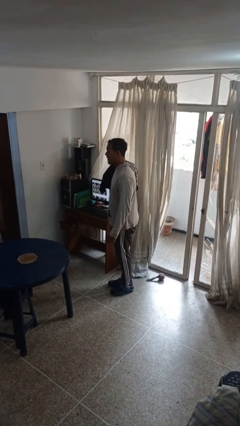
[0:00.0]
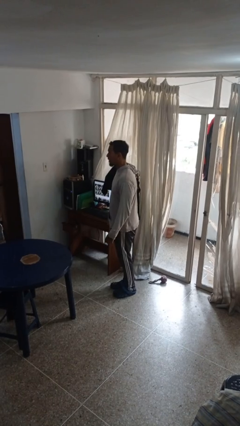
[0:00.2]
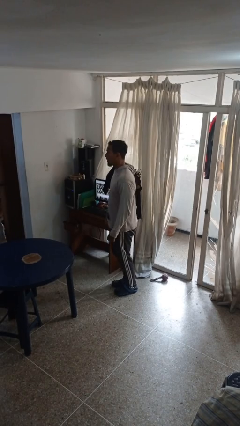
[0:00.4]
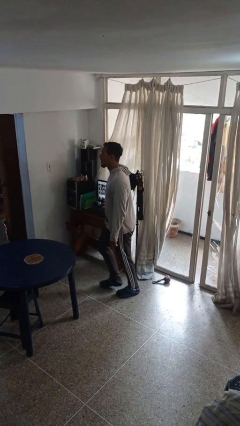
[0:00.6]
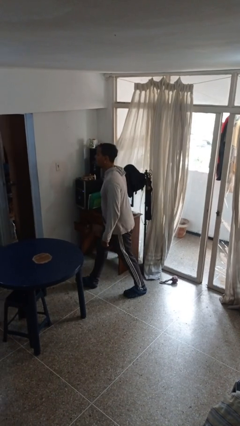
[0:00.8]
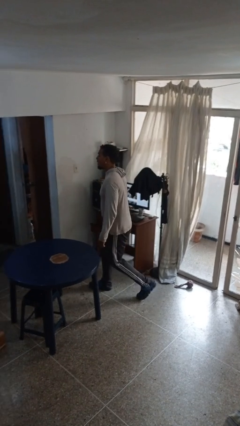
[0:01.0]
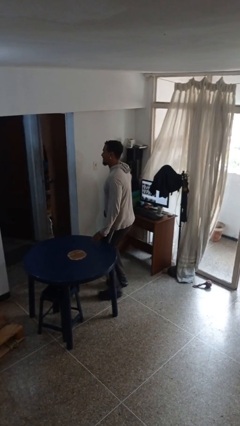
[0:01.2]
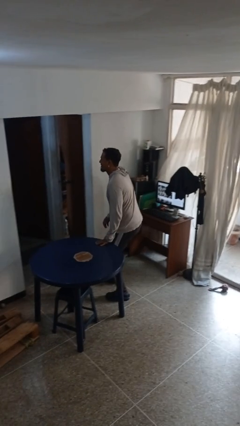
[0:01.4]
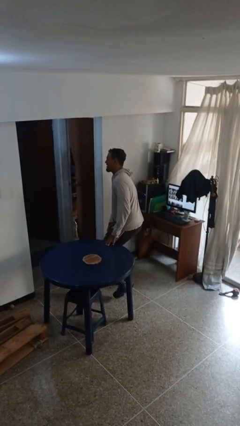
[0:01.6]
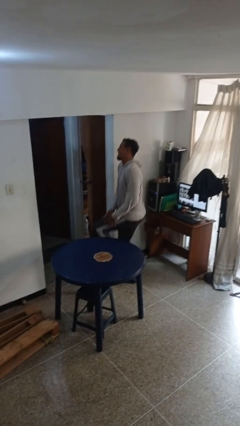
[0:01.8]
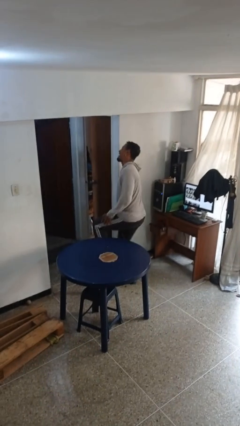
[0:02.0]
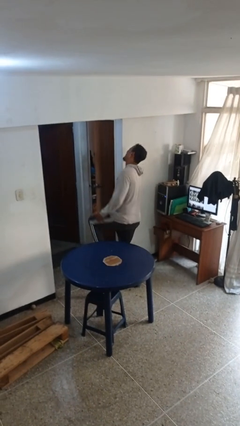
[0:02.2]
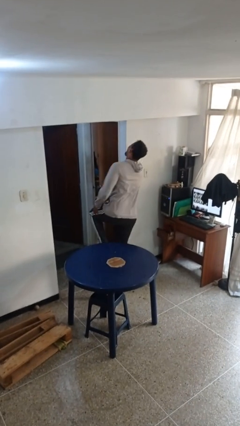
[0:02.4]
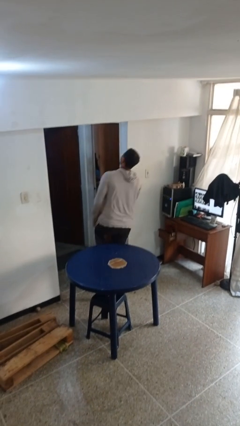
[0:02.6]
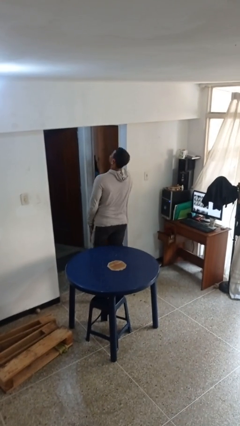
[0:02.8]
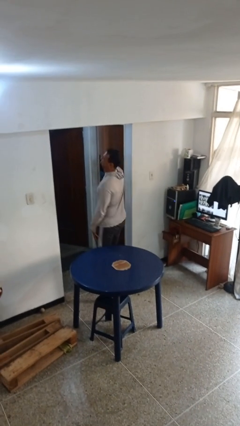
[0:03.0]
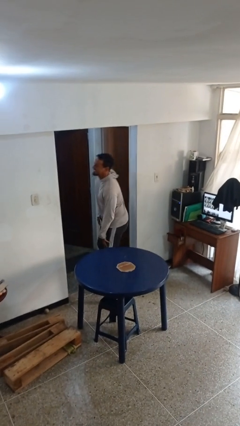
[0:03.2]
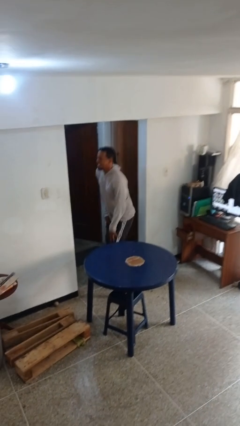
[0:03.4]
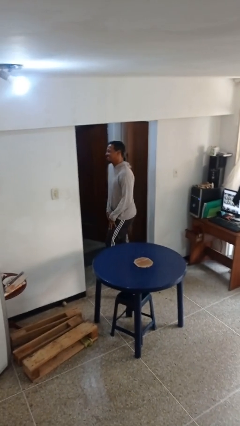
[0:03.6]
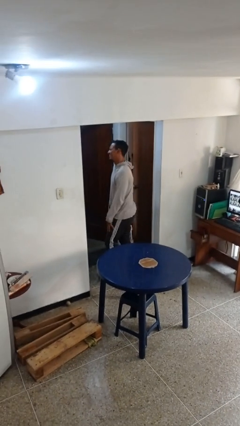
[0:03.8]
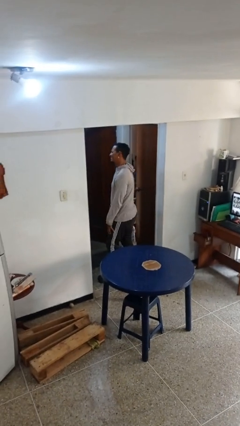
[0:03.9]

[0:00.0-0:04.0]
person bumps into table

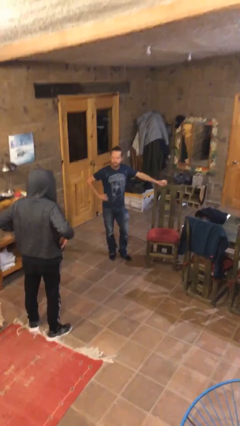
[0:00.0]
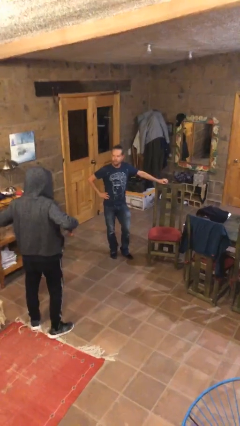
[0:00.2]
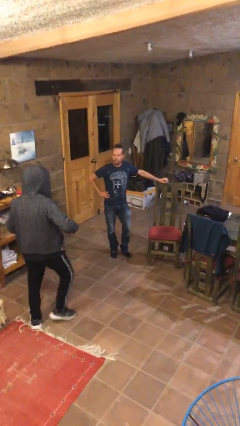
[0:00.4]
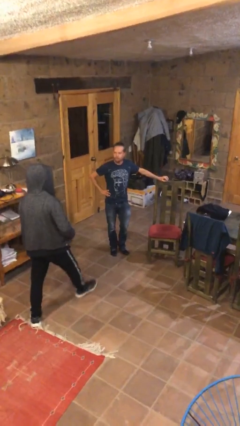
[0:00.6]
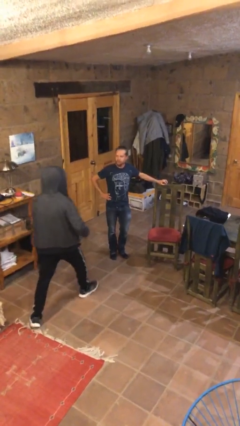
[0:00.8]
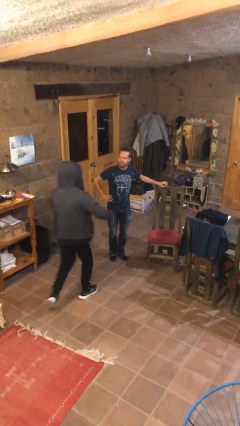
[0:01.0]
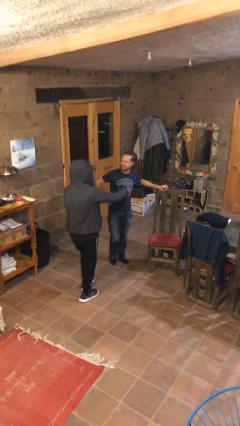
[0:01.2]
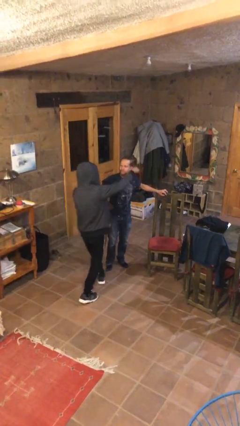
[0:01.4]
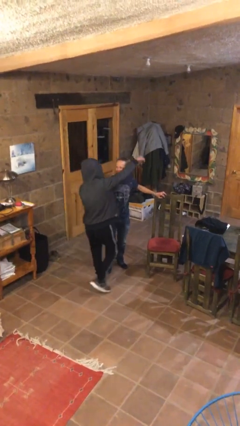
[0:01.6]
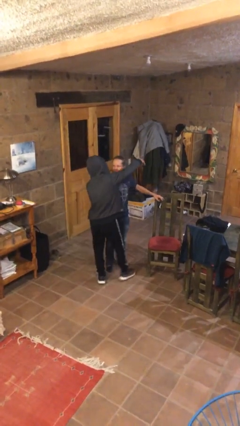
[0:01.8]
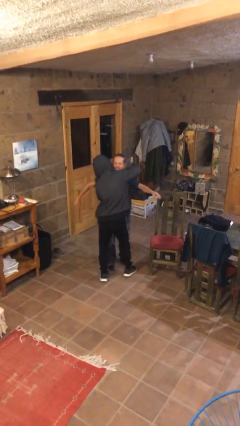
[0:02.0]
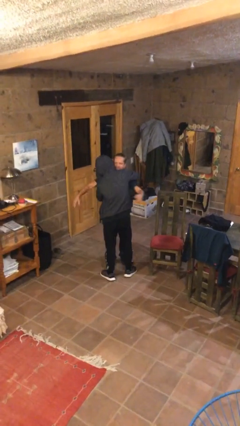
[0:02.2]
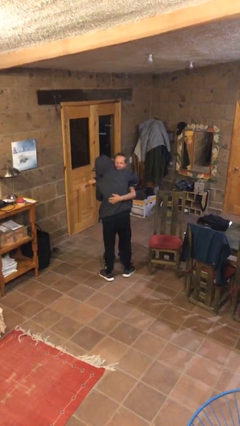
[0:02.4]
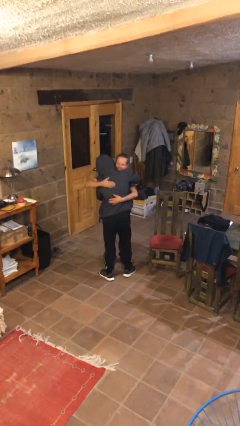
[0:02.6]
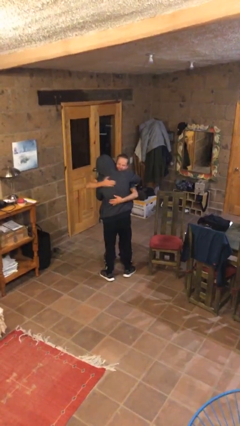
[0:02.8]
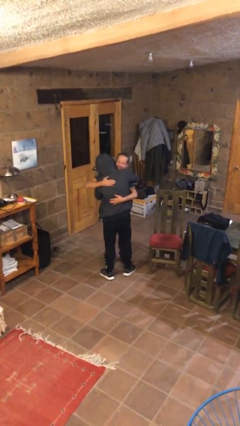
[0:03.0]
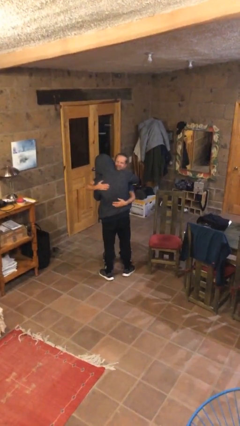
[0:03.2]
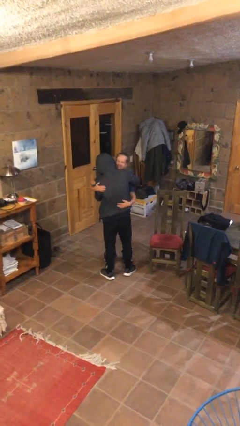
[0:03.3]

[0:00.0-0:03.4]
person embraces person

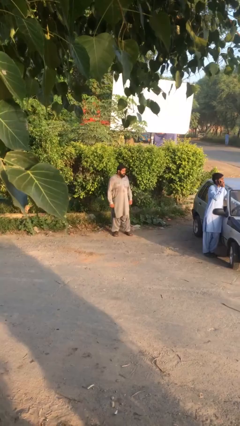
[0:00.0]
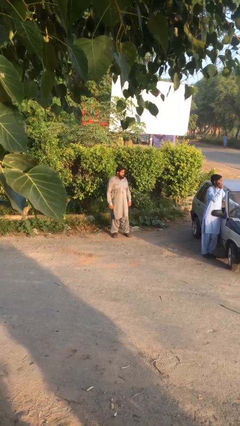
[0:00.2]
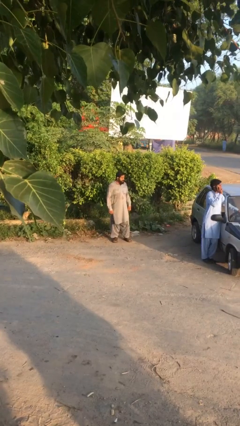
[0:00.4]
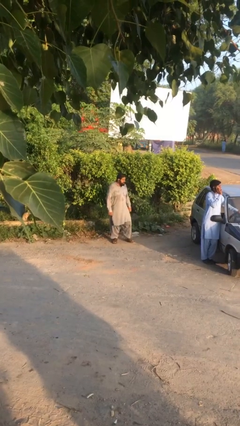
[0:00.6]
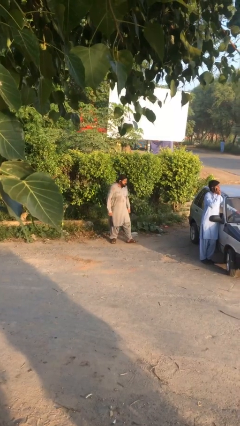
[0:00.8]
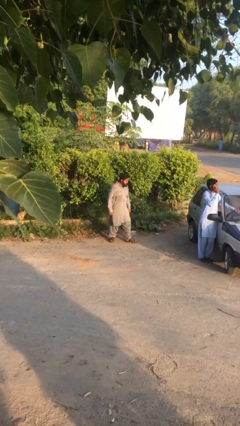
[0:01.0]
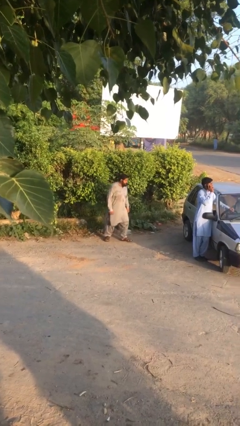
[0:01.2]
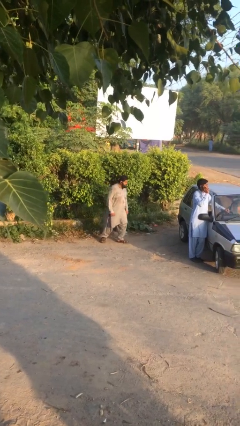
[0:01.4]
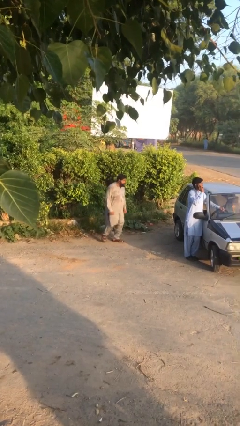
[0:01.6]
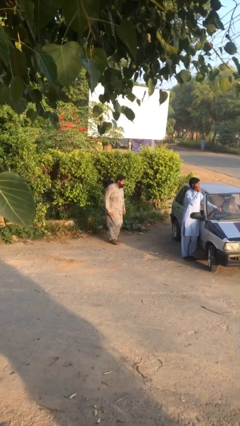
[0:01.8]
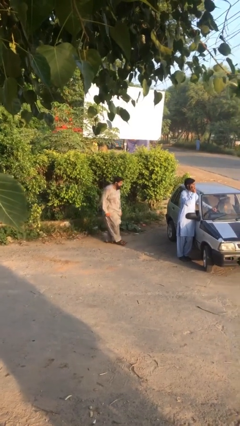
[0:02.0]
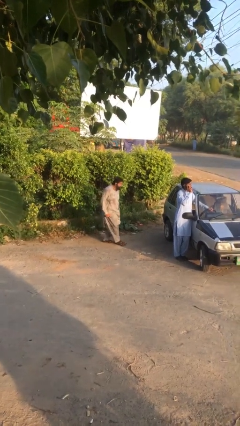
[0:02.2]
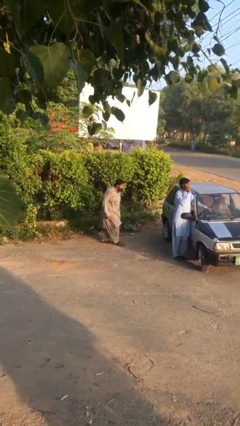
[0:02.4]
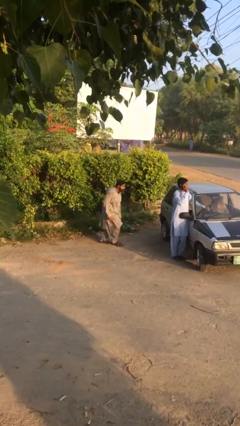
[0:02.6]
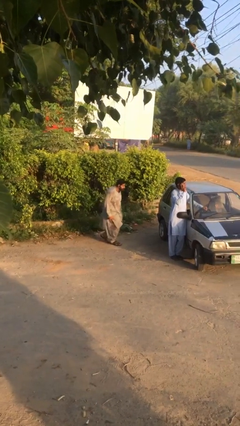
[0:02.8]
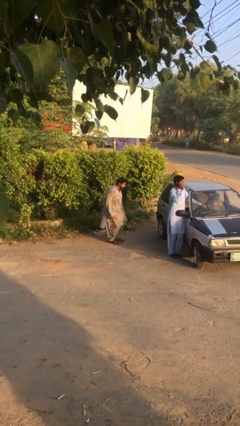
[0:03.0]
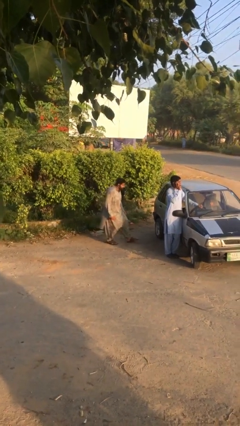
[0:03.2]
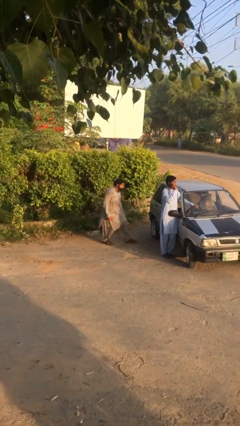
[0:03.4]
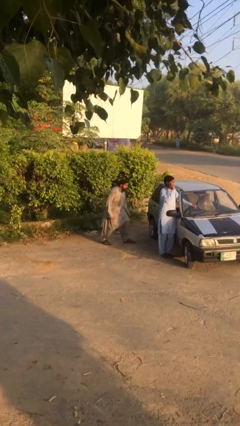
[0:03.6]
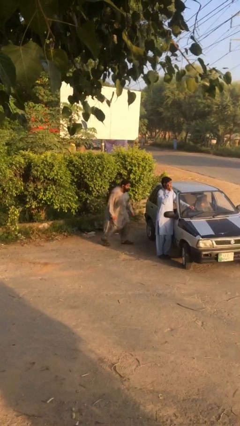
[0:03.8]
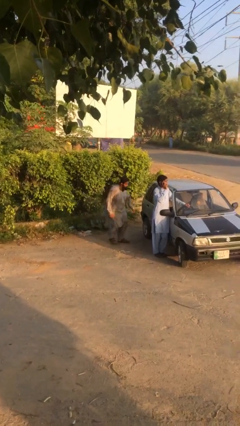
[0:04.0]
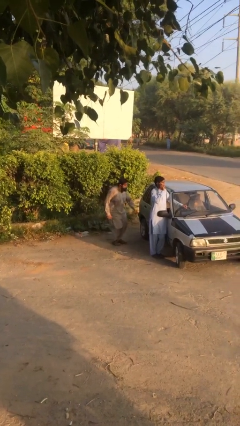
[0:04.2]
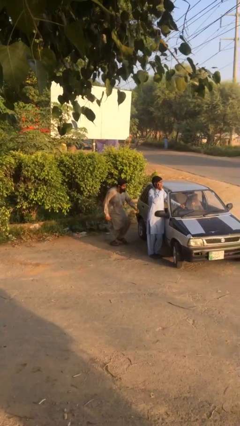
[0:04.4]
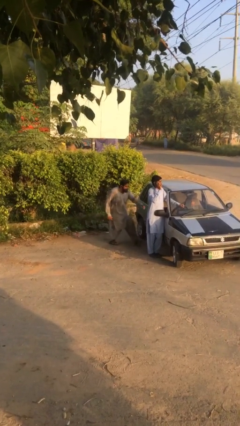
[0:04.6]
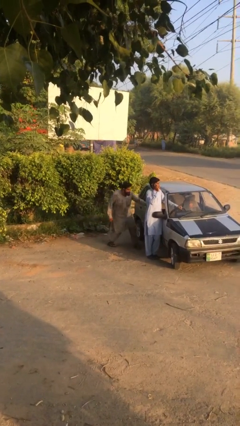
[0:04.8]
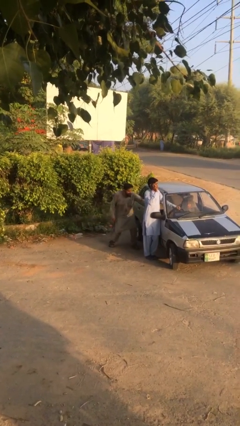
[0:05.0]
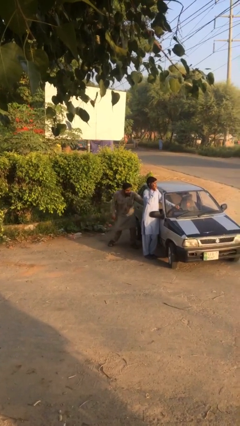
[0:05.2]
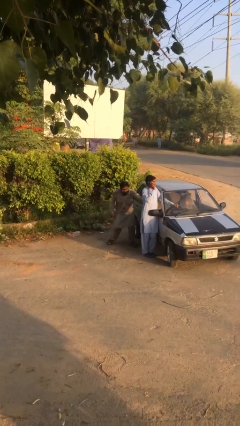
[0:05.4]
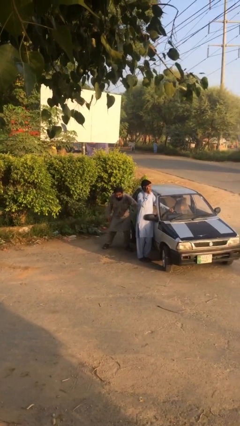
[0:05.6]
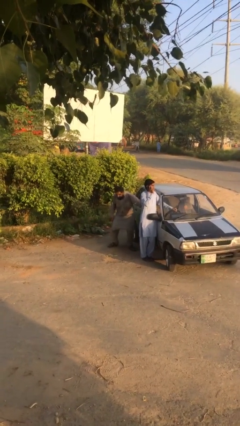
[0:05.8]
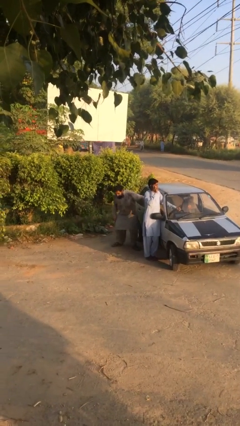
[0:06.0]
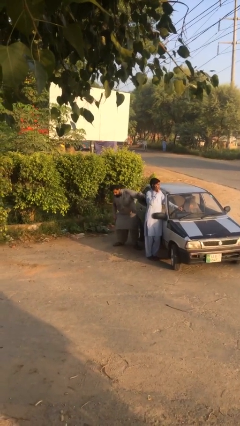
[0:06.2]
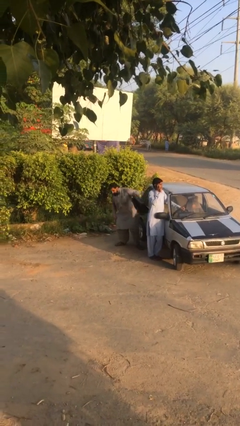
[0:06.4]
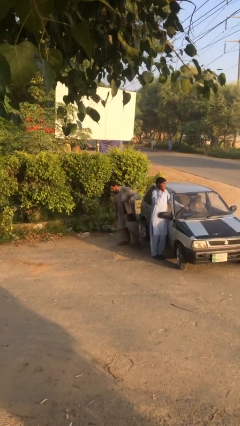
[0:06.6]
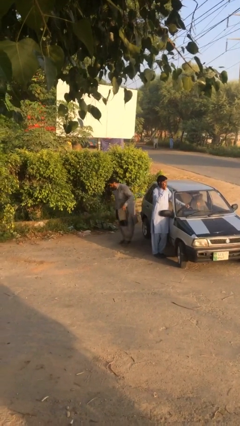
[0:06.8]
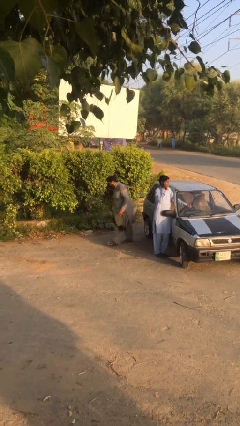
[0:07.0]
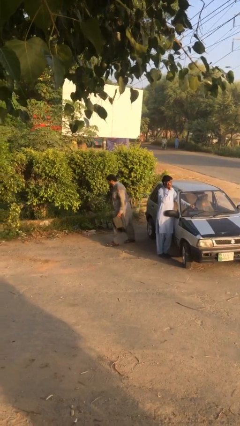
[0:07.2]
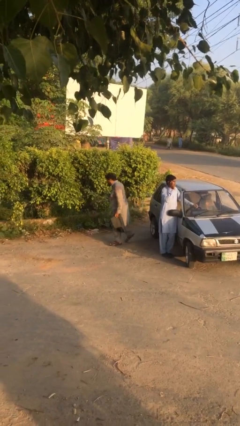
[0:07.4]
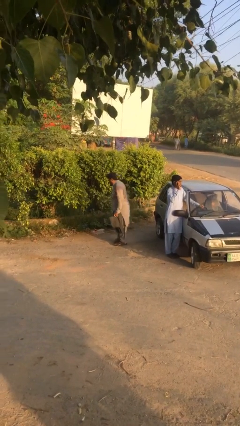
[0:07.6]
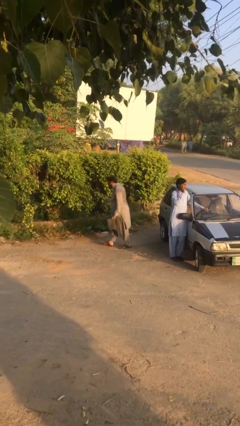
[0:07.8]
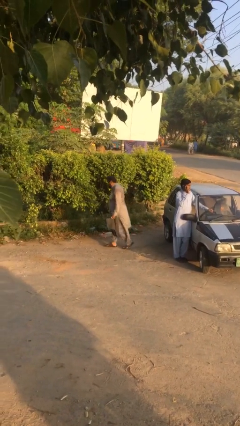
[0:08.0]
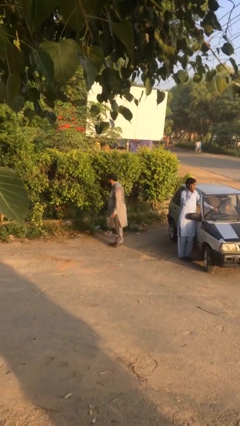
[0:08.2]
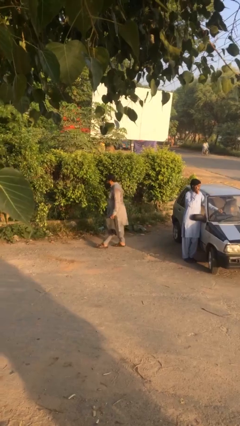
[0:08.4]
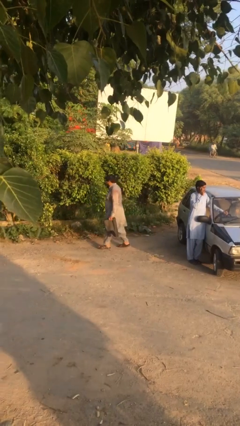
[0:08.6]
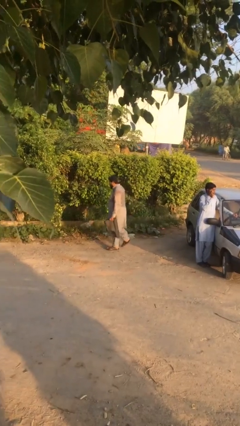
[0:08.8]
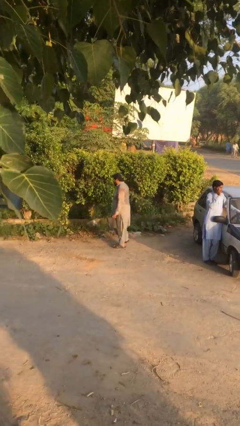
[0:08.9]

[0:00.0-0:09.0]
person steals object from person

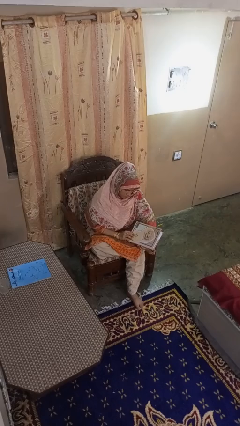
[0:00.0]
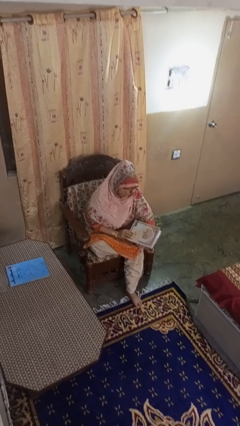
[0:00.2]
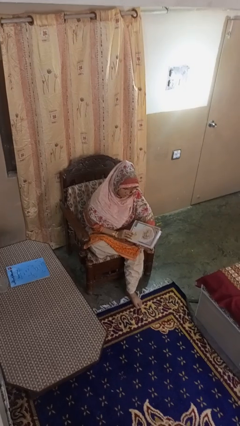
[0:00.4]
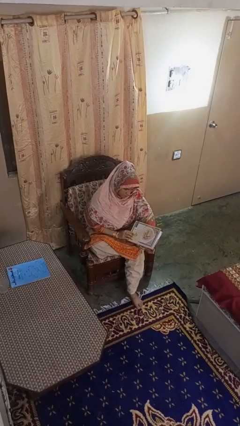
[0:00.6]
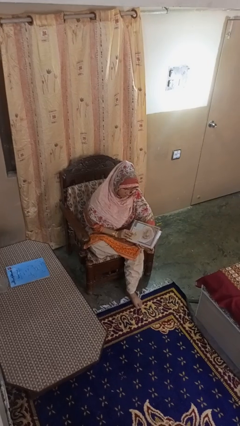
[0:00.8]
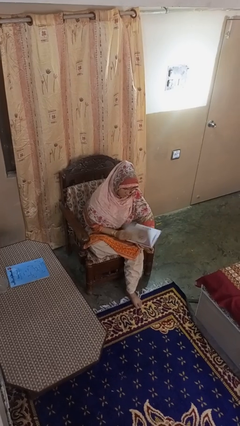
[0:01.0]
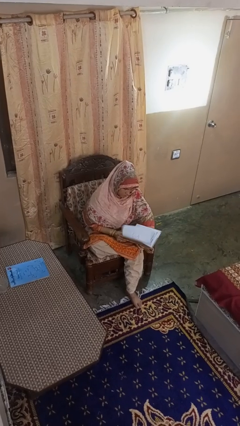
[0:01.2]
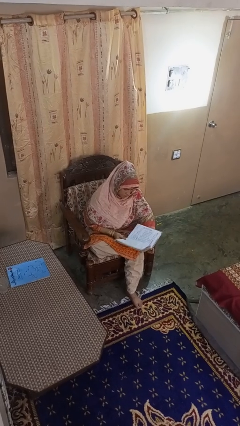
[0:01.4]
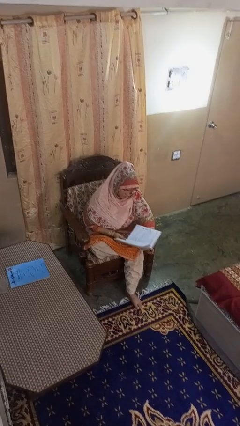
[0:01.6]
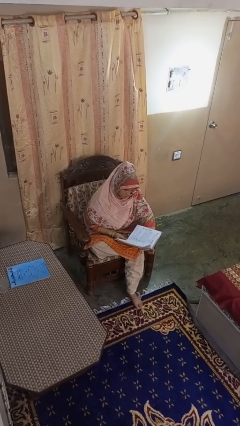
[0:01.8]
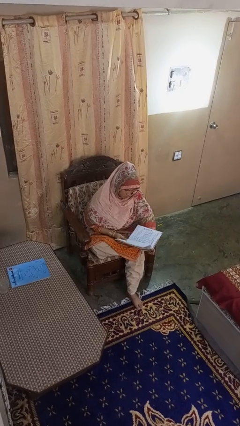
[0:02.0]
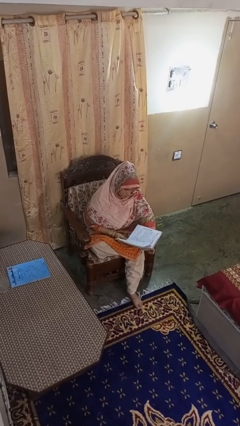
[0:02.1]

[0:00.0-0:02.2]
person reads book
